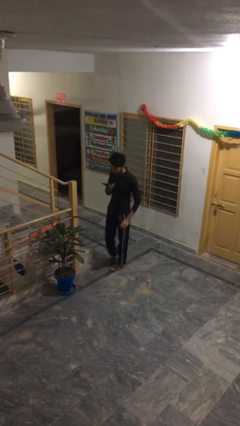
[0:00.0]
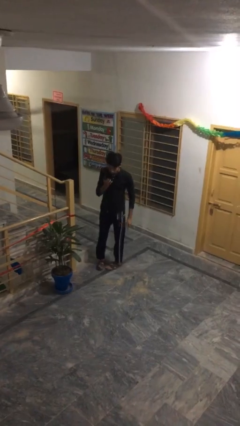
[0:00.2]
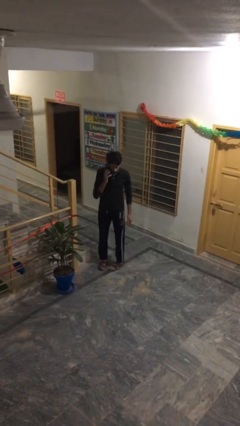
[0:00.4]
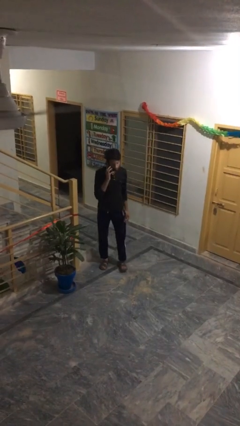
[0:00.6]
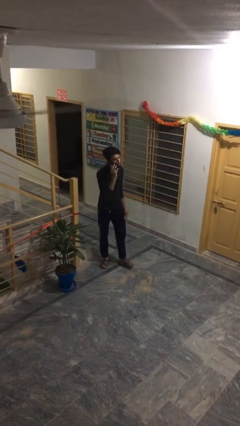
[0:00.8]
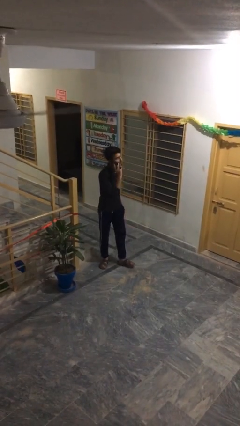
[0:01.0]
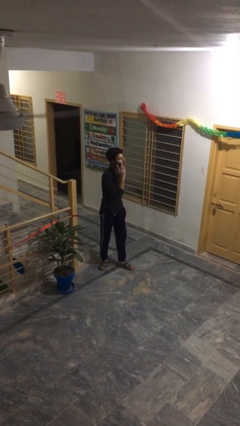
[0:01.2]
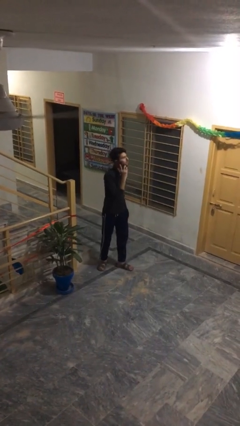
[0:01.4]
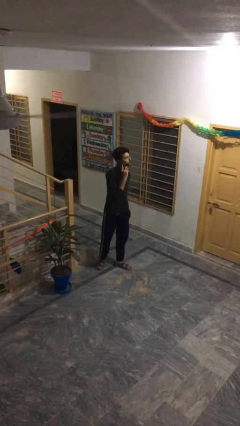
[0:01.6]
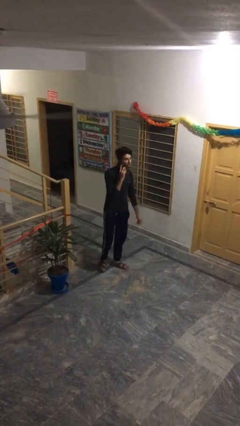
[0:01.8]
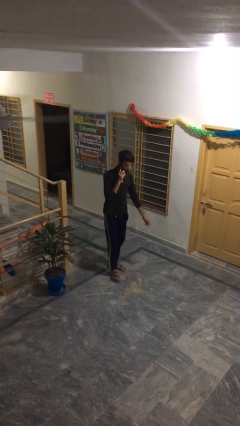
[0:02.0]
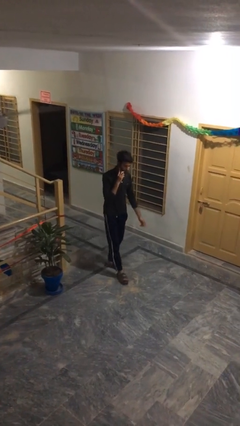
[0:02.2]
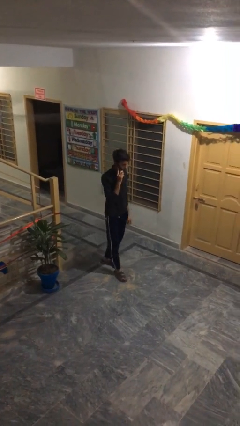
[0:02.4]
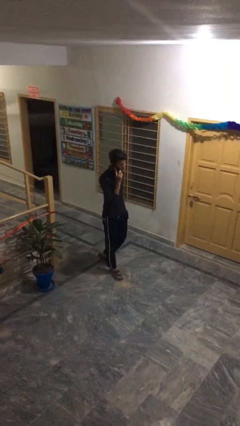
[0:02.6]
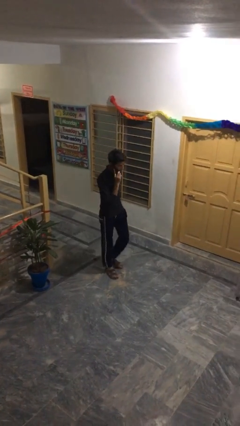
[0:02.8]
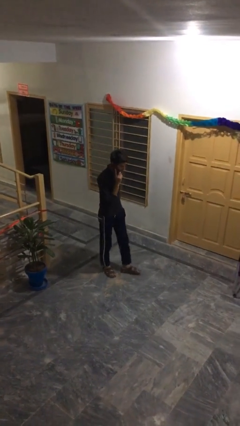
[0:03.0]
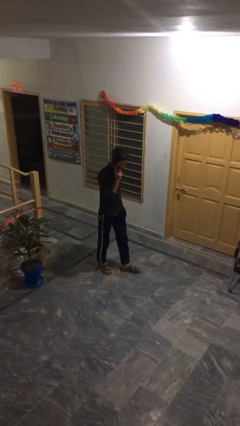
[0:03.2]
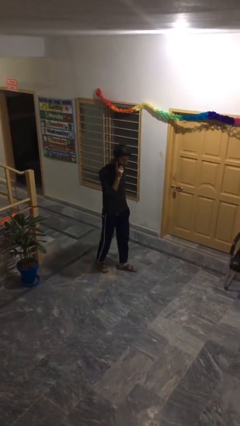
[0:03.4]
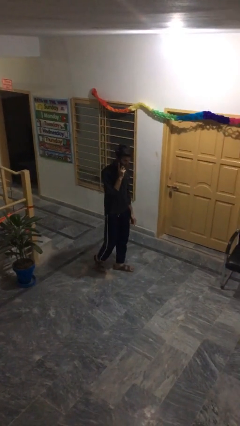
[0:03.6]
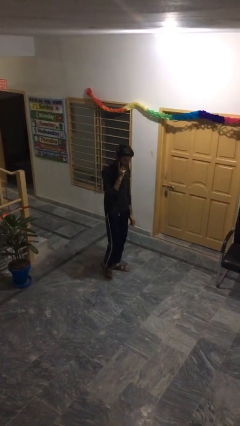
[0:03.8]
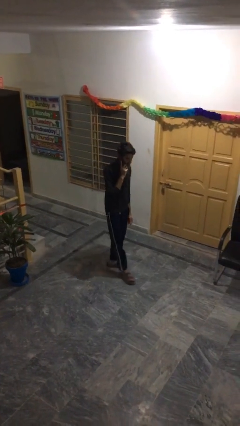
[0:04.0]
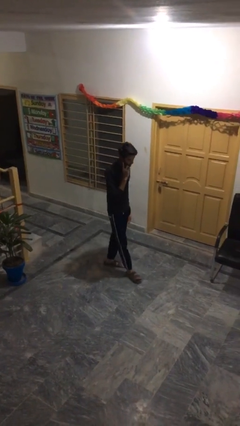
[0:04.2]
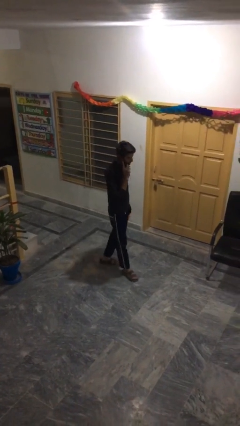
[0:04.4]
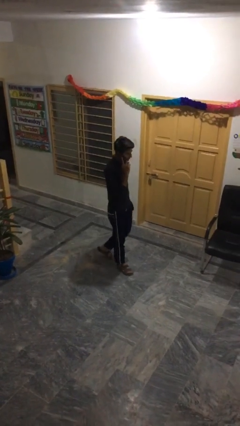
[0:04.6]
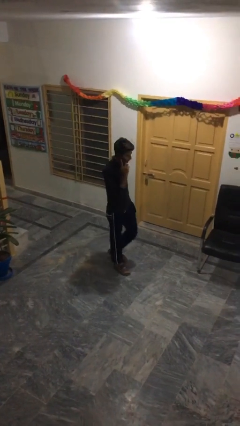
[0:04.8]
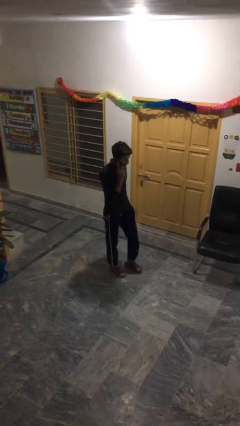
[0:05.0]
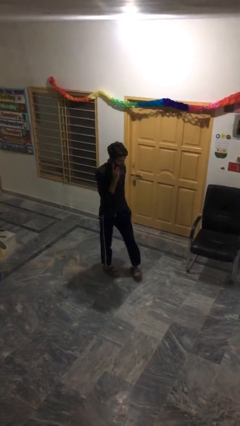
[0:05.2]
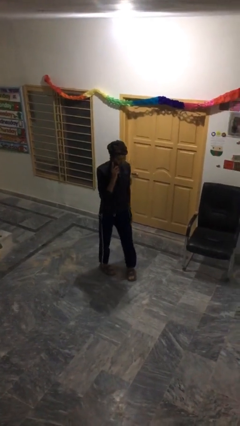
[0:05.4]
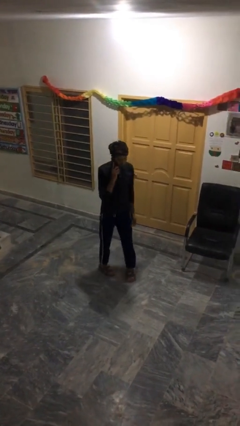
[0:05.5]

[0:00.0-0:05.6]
person talks on phone

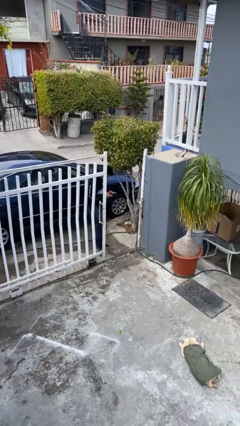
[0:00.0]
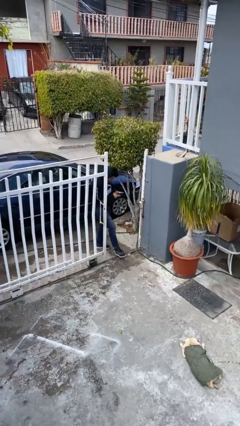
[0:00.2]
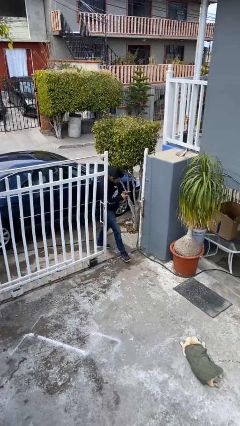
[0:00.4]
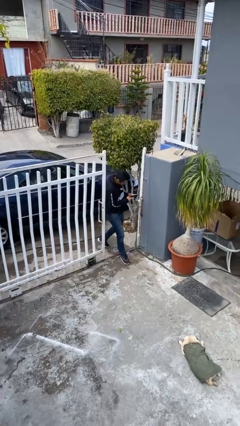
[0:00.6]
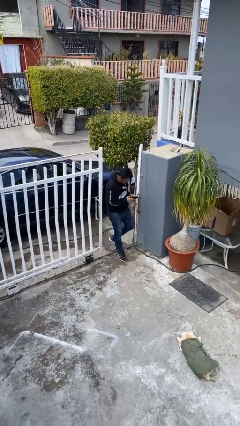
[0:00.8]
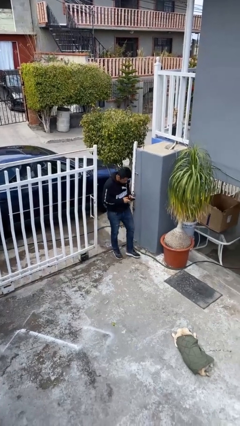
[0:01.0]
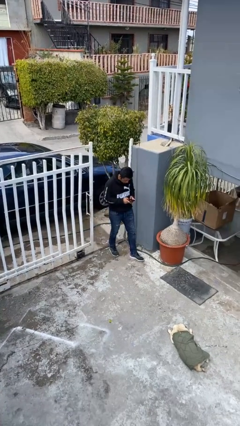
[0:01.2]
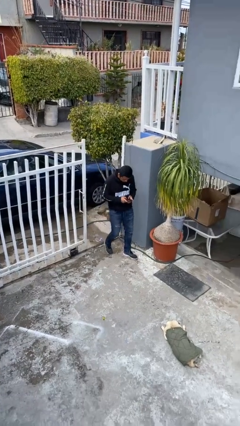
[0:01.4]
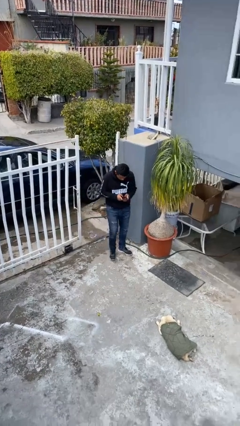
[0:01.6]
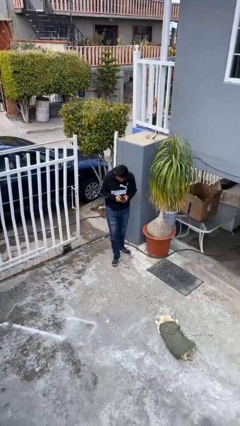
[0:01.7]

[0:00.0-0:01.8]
person enters scene through structure

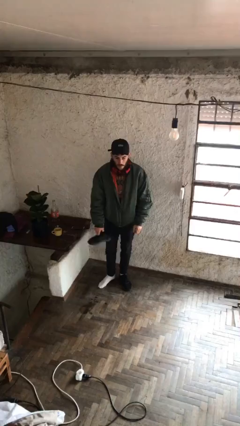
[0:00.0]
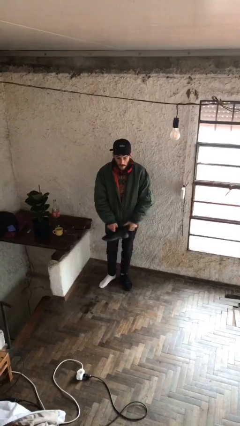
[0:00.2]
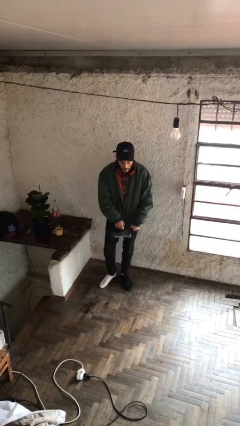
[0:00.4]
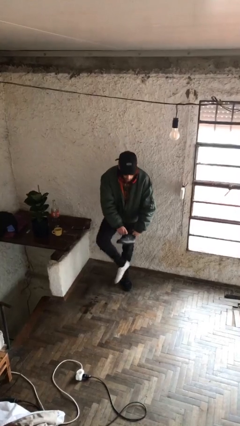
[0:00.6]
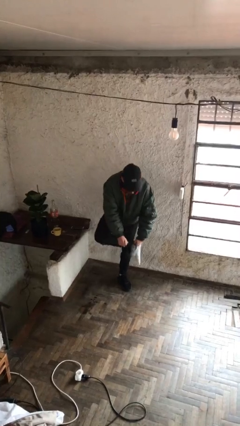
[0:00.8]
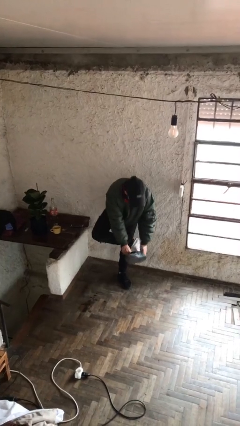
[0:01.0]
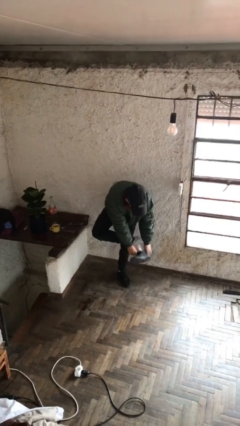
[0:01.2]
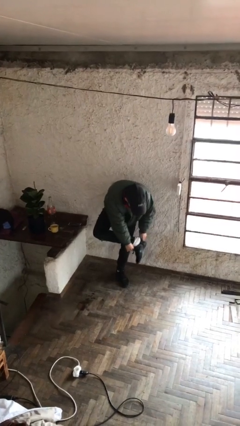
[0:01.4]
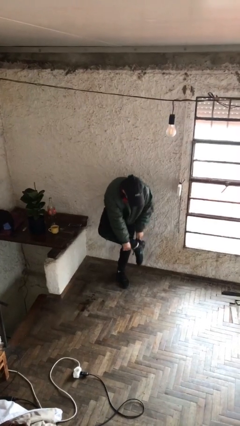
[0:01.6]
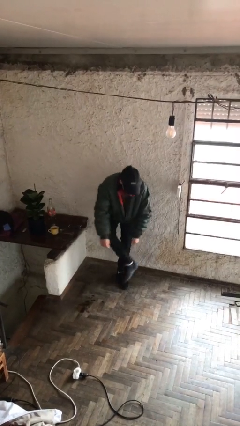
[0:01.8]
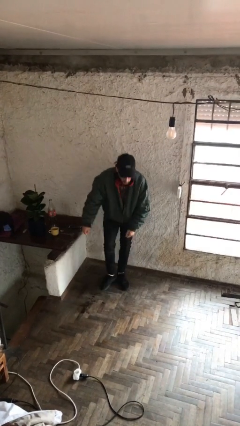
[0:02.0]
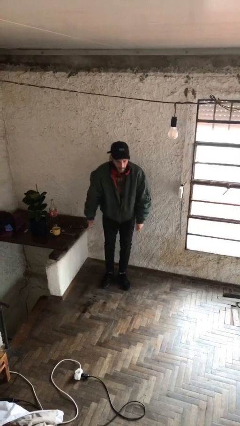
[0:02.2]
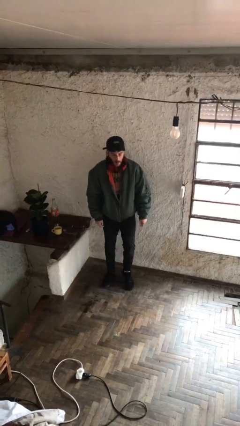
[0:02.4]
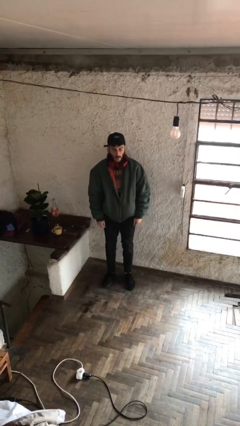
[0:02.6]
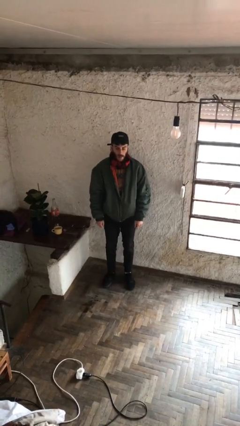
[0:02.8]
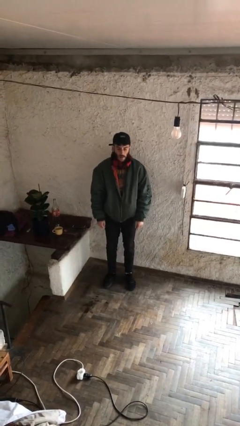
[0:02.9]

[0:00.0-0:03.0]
person puts on shoes

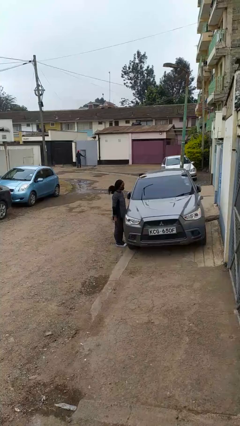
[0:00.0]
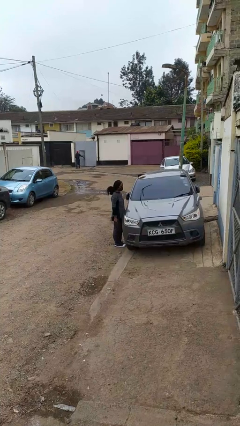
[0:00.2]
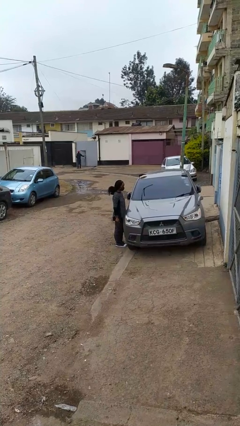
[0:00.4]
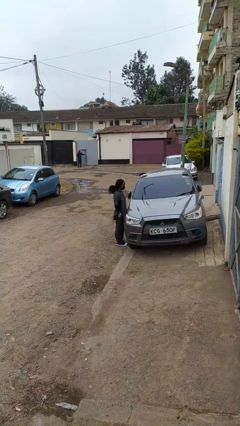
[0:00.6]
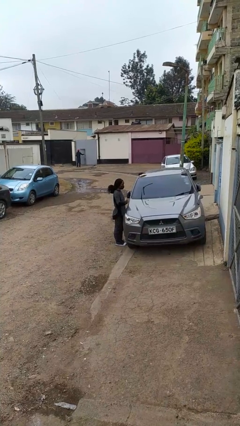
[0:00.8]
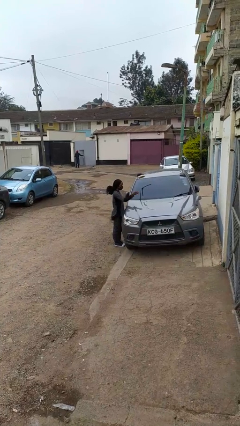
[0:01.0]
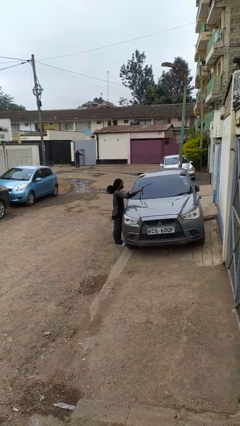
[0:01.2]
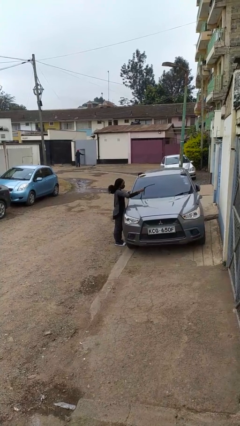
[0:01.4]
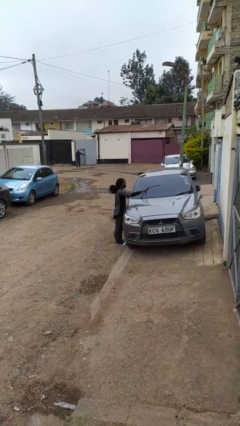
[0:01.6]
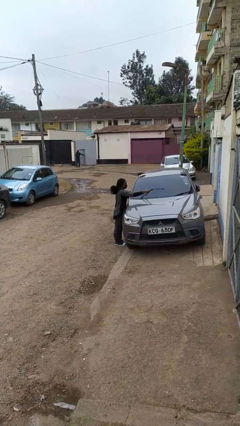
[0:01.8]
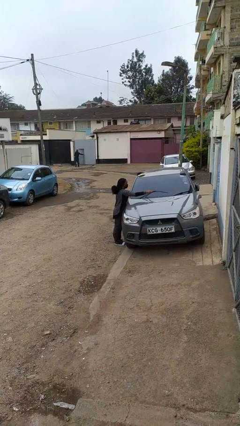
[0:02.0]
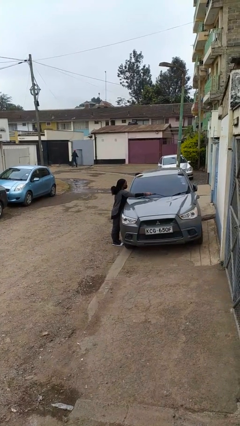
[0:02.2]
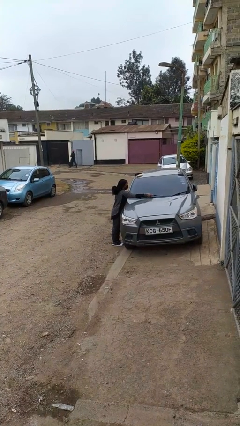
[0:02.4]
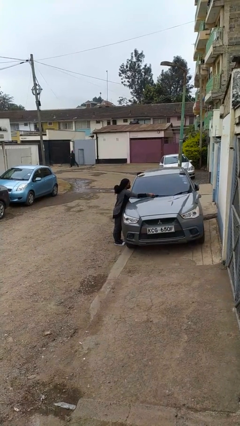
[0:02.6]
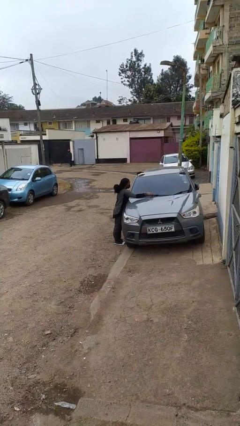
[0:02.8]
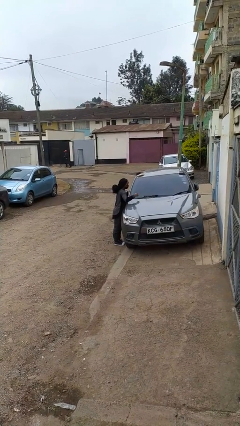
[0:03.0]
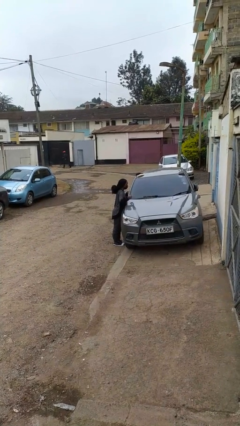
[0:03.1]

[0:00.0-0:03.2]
person puts down object on couch

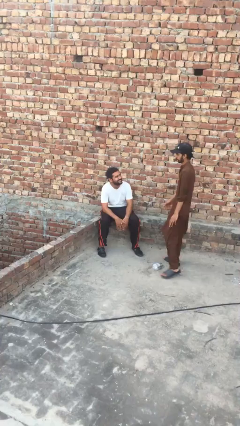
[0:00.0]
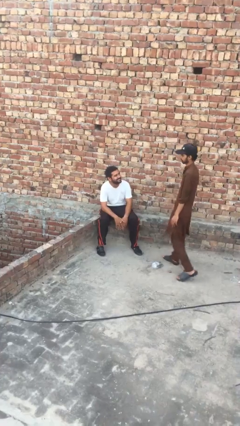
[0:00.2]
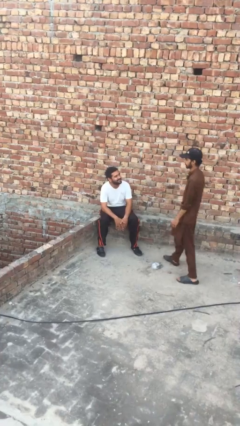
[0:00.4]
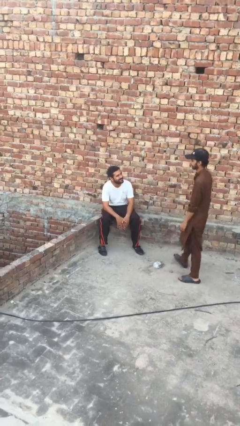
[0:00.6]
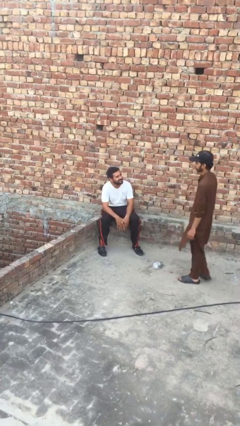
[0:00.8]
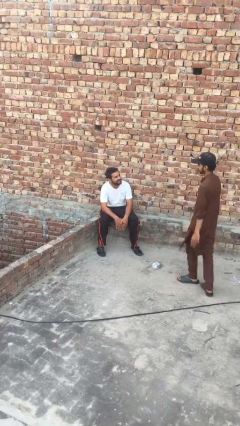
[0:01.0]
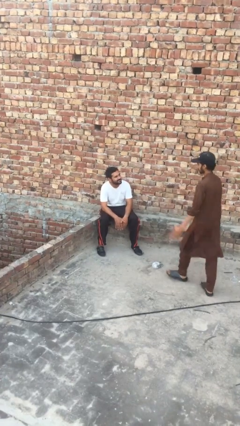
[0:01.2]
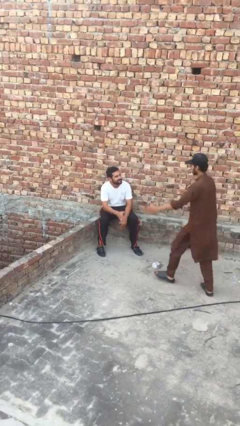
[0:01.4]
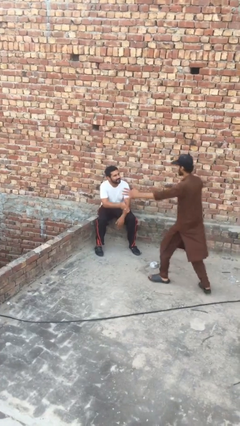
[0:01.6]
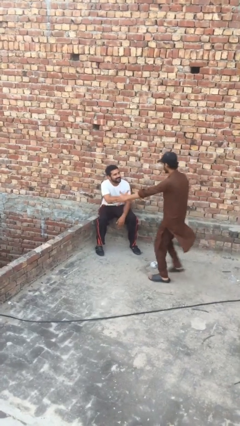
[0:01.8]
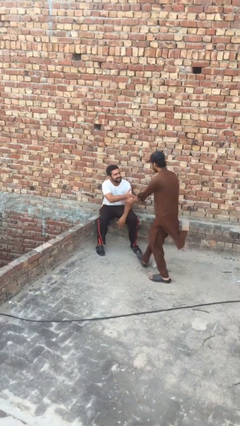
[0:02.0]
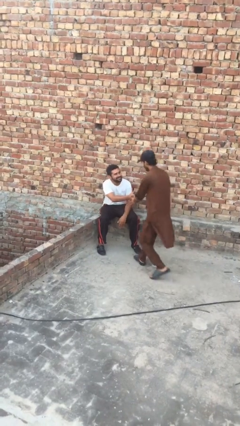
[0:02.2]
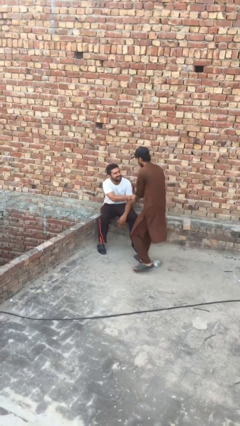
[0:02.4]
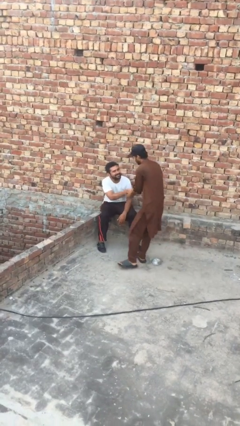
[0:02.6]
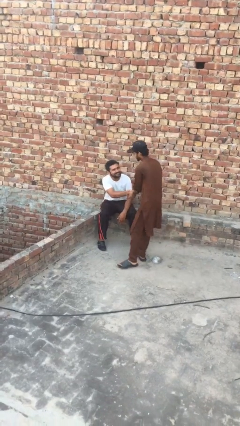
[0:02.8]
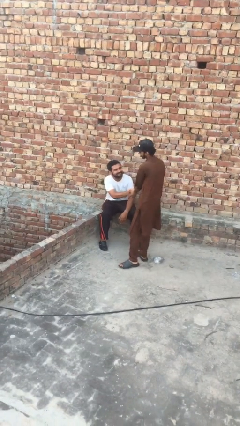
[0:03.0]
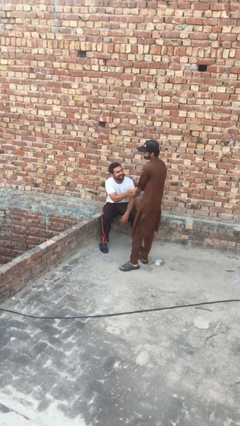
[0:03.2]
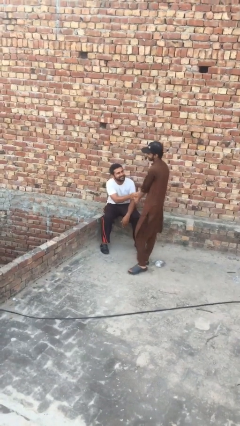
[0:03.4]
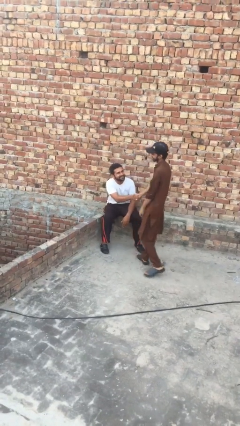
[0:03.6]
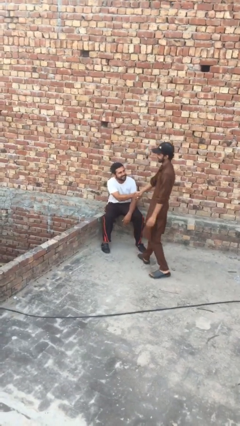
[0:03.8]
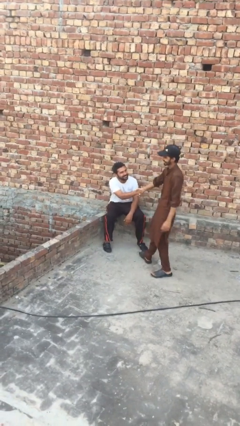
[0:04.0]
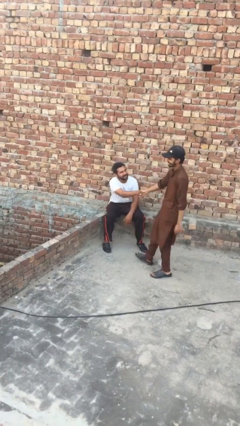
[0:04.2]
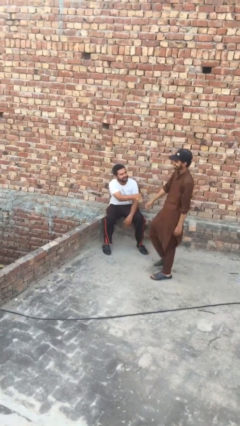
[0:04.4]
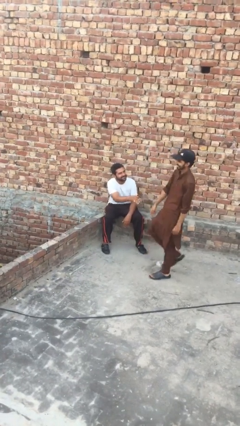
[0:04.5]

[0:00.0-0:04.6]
person shakes hand
